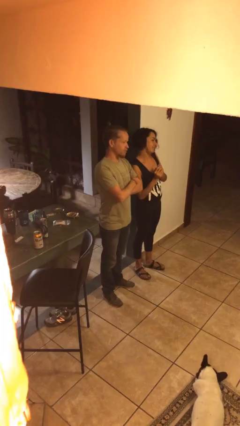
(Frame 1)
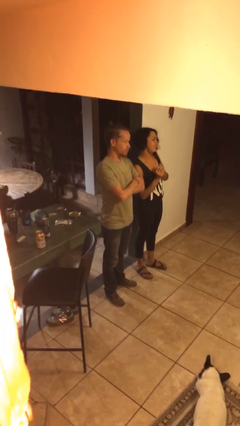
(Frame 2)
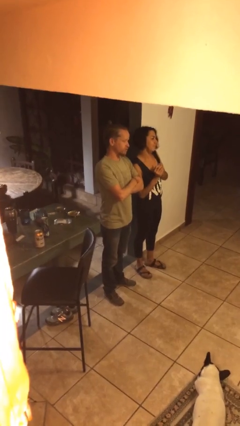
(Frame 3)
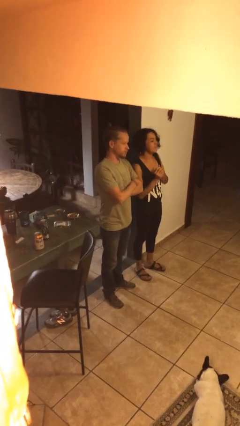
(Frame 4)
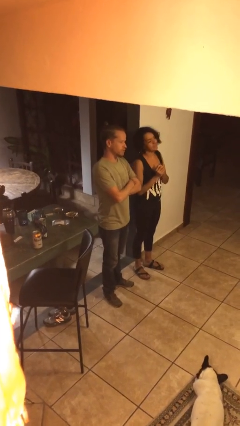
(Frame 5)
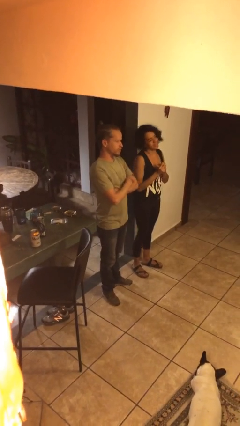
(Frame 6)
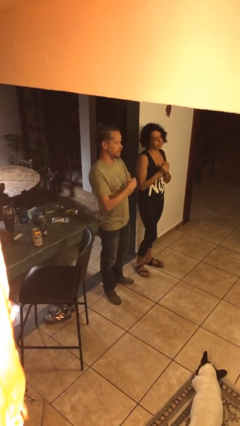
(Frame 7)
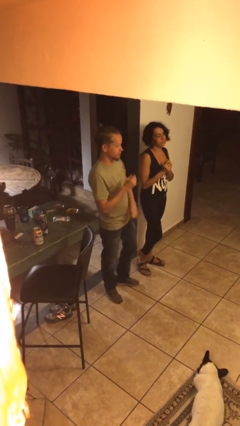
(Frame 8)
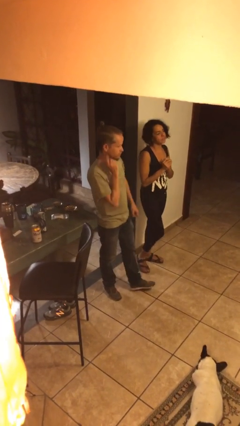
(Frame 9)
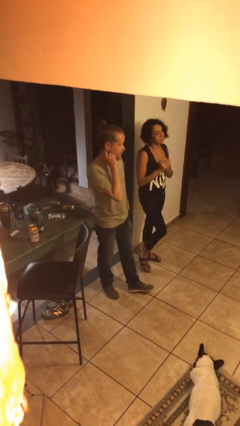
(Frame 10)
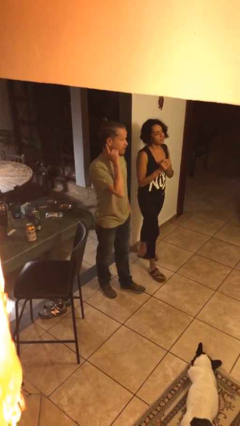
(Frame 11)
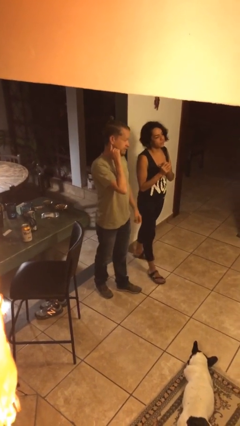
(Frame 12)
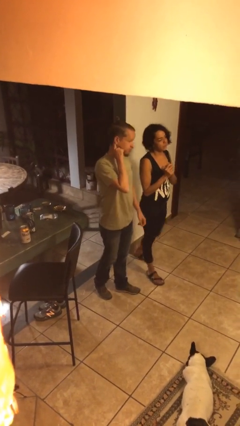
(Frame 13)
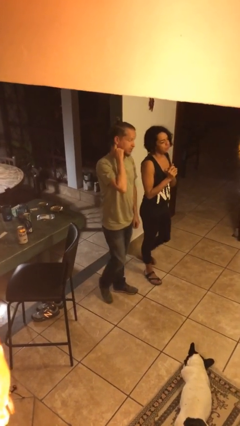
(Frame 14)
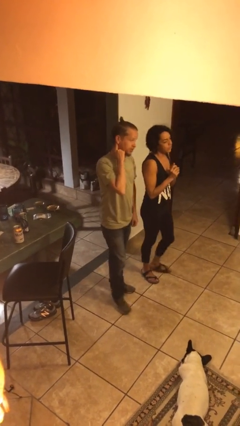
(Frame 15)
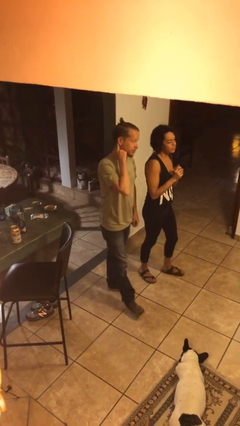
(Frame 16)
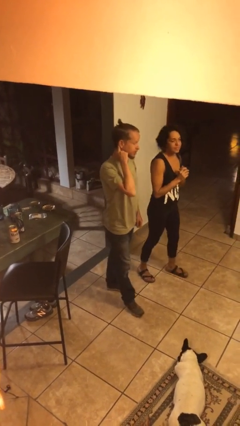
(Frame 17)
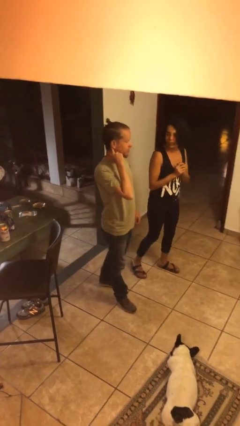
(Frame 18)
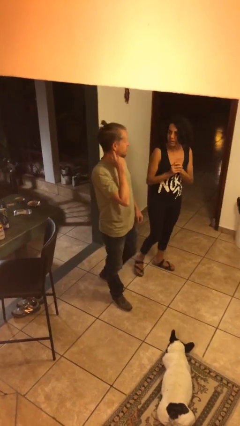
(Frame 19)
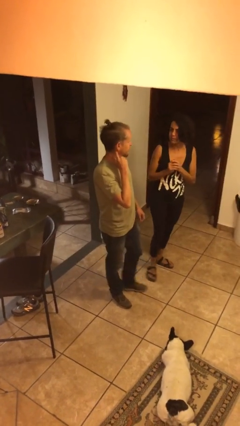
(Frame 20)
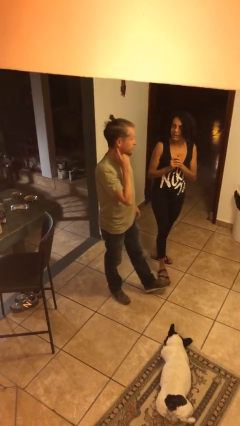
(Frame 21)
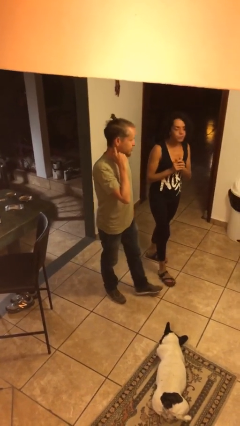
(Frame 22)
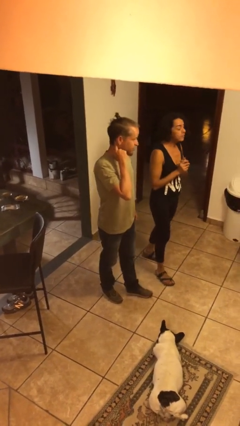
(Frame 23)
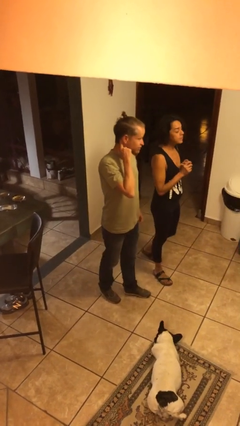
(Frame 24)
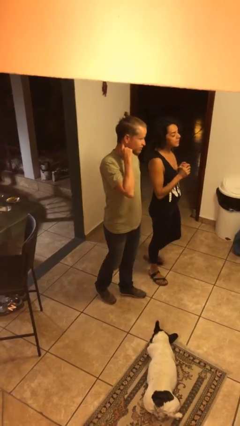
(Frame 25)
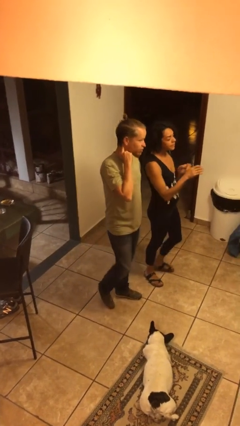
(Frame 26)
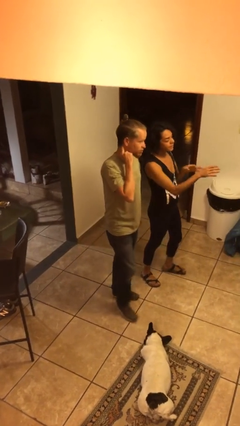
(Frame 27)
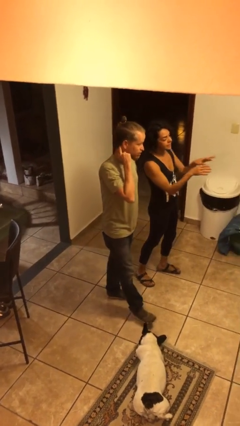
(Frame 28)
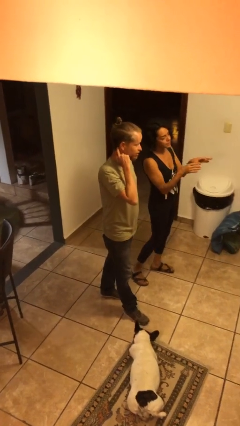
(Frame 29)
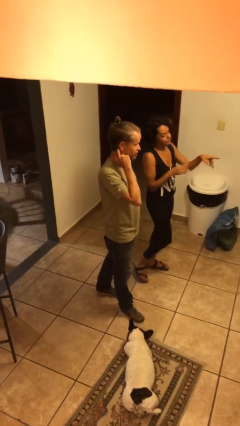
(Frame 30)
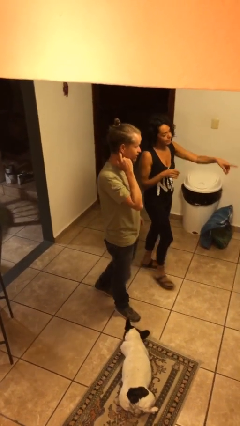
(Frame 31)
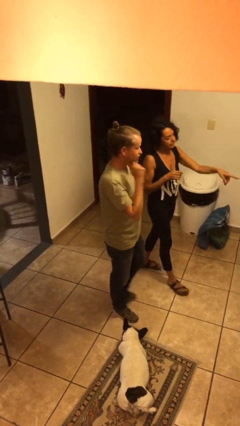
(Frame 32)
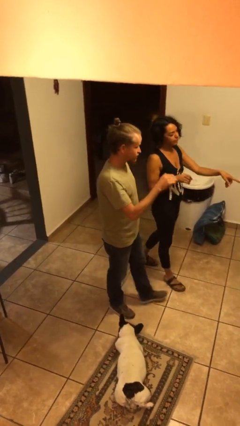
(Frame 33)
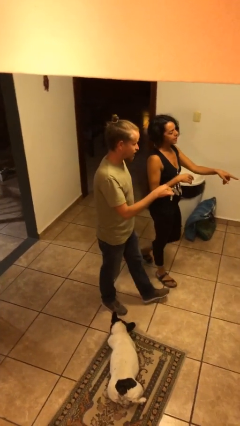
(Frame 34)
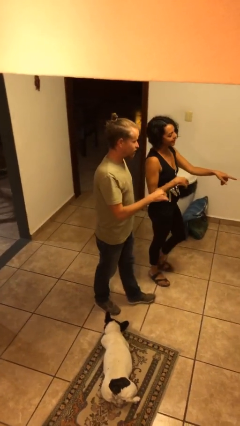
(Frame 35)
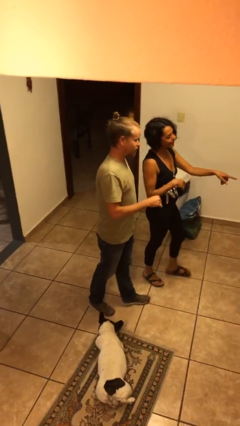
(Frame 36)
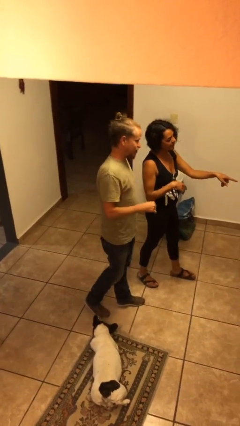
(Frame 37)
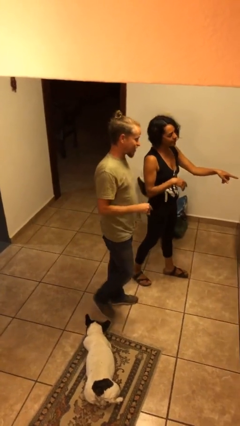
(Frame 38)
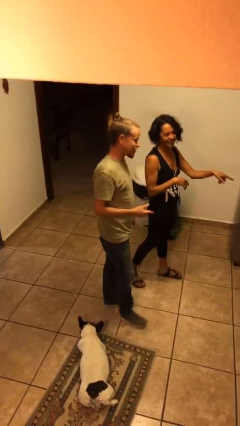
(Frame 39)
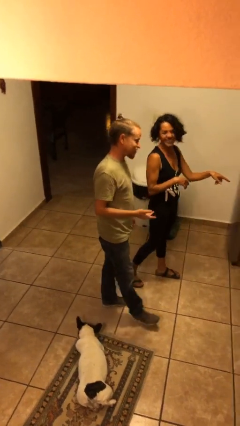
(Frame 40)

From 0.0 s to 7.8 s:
person talks to person

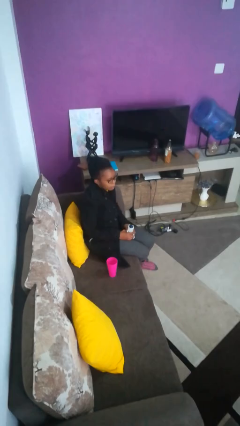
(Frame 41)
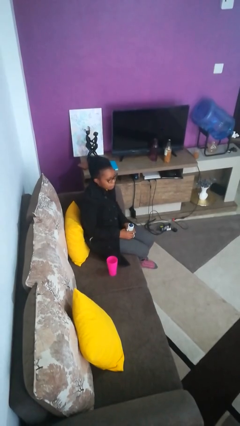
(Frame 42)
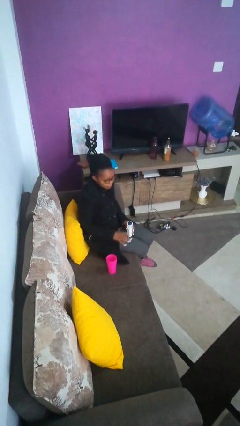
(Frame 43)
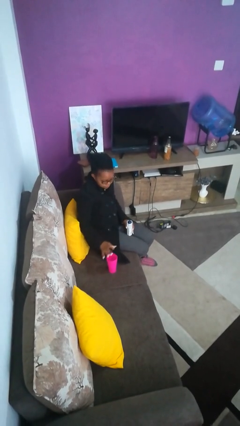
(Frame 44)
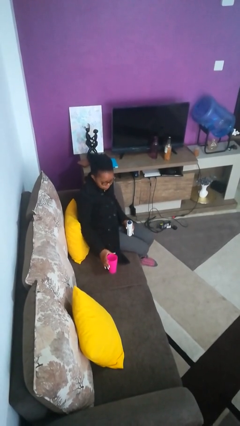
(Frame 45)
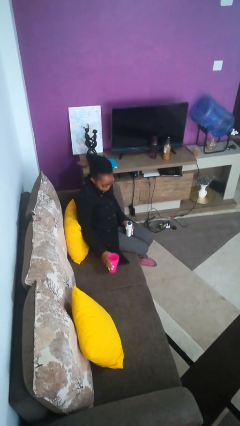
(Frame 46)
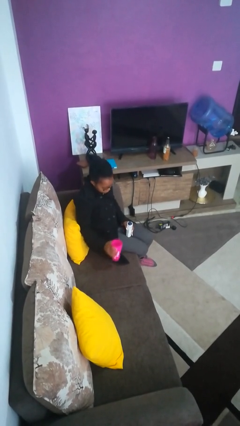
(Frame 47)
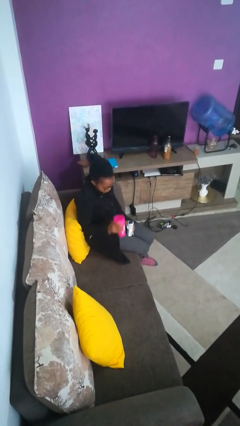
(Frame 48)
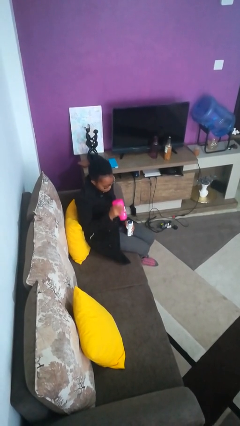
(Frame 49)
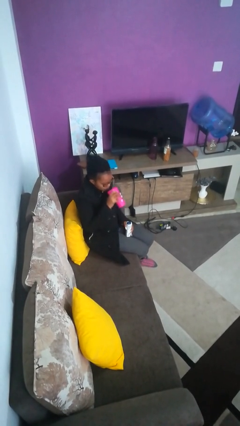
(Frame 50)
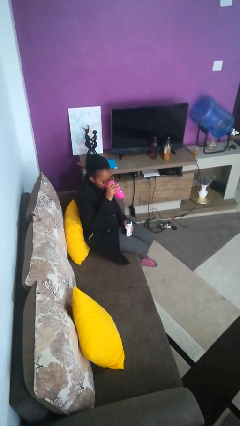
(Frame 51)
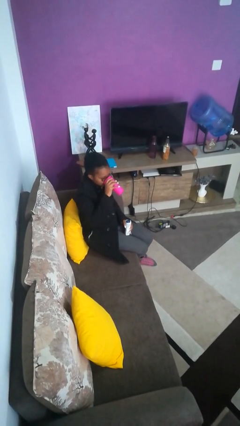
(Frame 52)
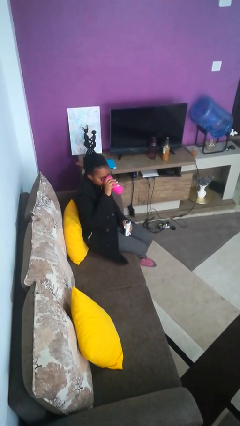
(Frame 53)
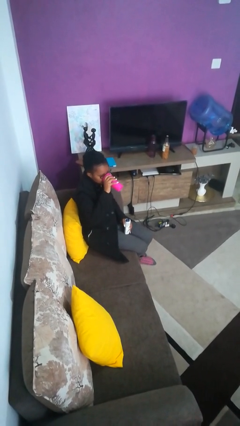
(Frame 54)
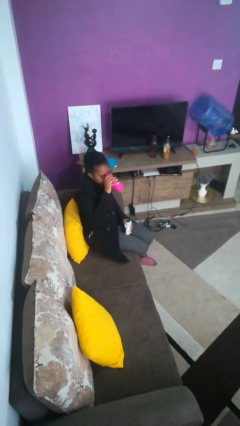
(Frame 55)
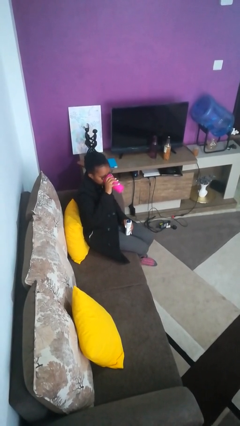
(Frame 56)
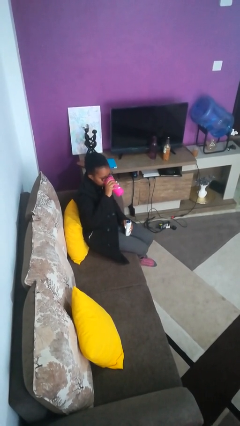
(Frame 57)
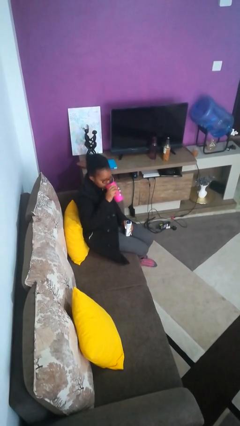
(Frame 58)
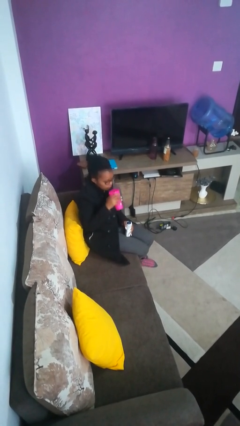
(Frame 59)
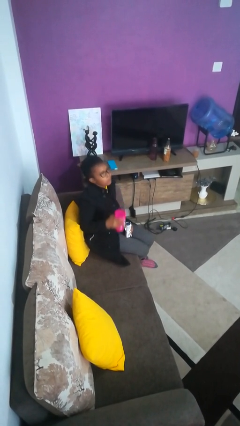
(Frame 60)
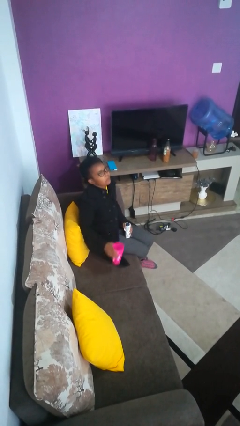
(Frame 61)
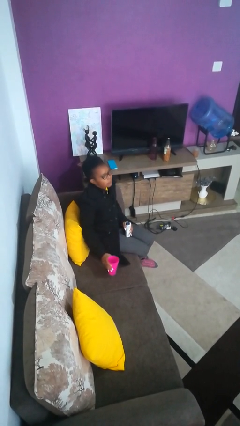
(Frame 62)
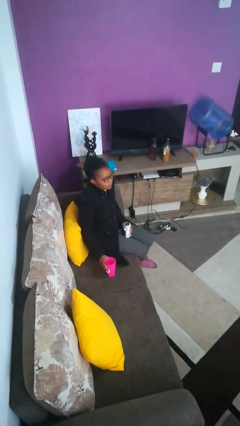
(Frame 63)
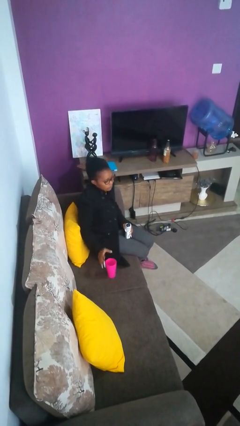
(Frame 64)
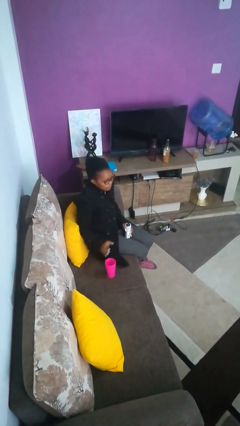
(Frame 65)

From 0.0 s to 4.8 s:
person drinks from cup

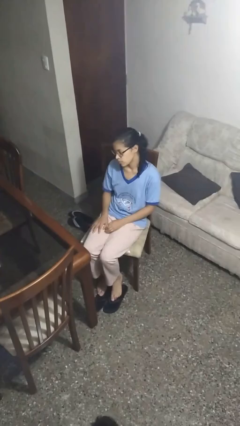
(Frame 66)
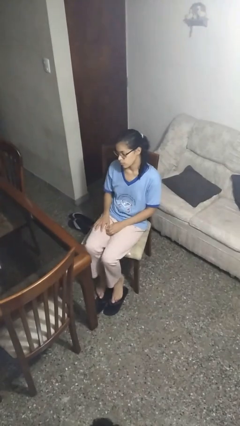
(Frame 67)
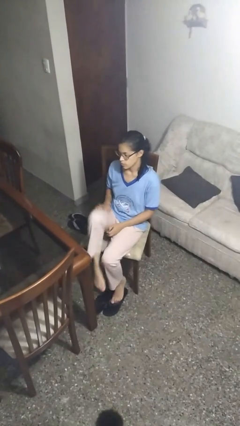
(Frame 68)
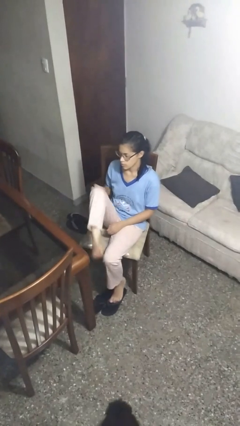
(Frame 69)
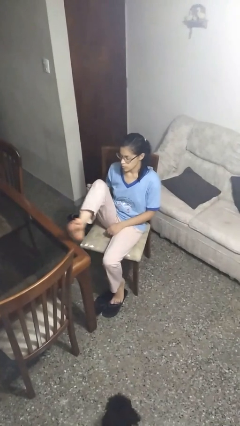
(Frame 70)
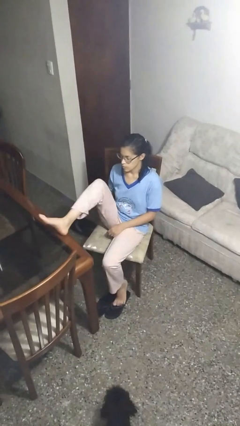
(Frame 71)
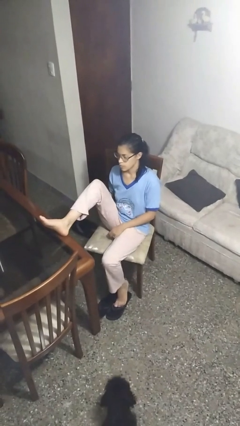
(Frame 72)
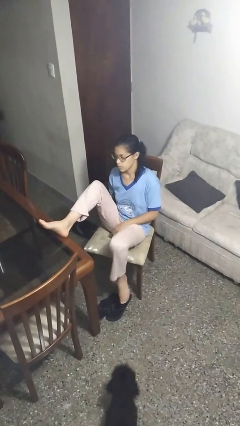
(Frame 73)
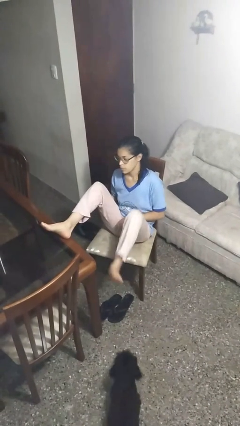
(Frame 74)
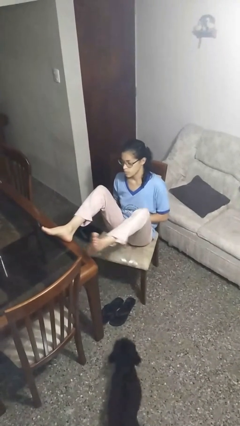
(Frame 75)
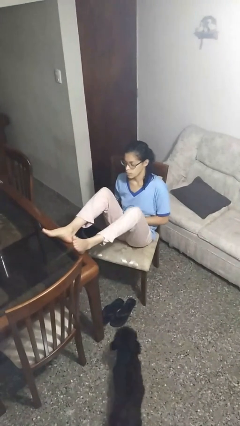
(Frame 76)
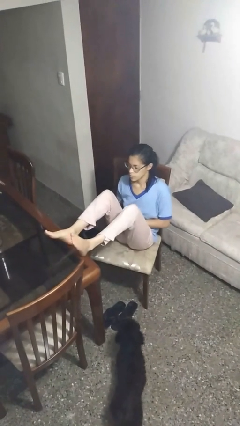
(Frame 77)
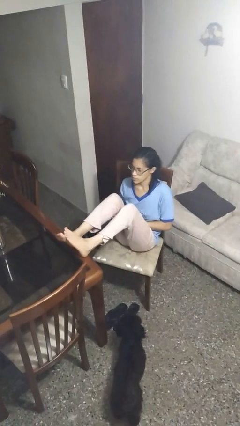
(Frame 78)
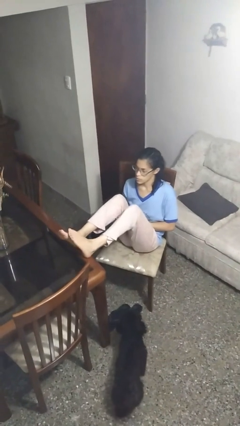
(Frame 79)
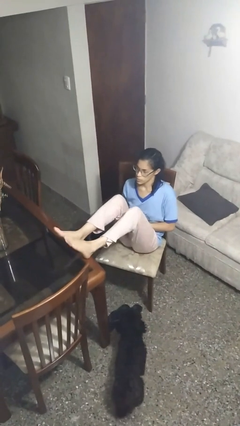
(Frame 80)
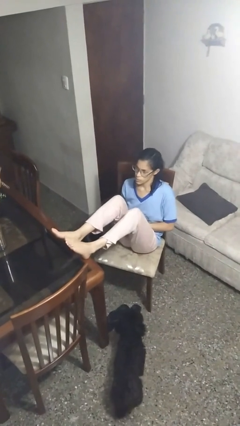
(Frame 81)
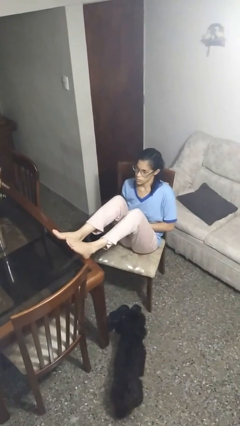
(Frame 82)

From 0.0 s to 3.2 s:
person puts feet up

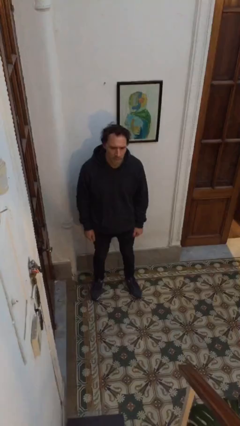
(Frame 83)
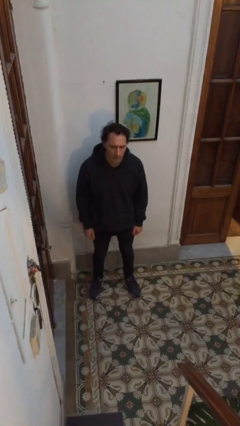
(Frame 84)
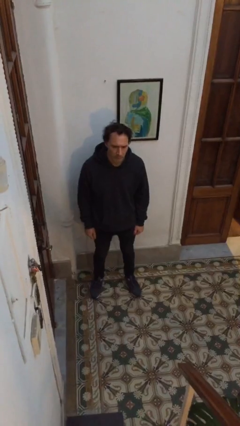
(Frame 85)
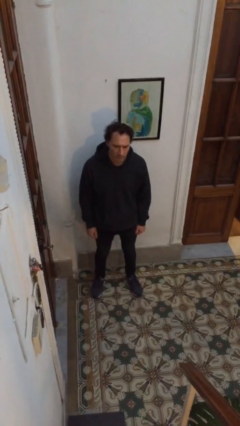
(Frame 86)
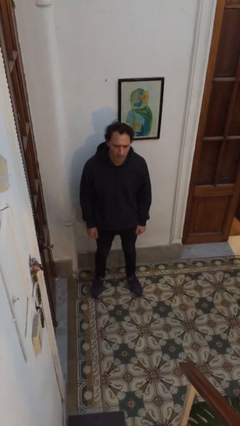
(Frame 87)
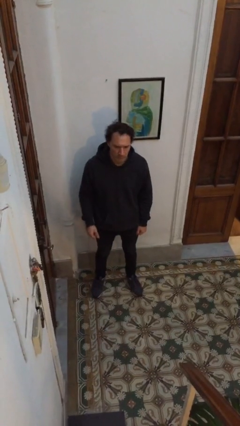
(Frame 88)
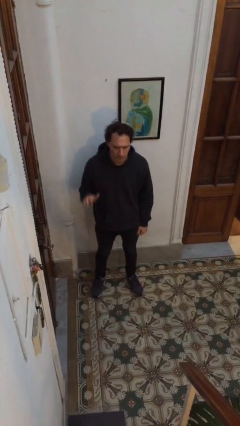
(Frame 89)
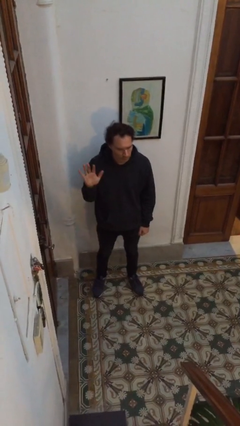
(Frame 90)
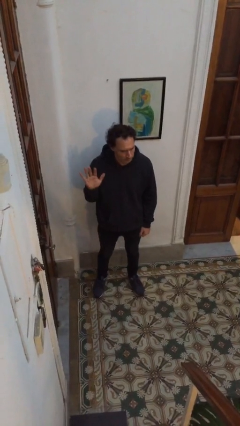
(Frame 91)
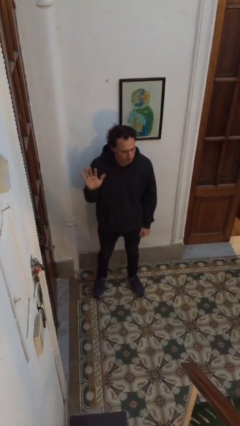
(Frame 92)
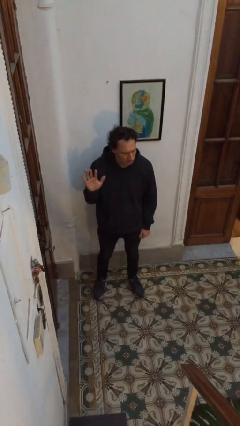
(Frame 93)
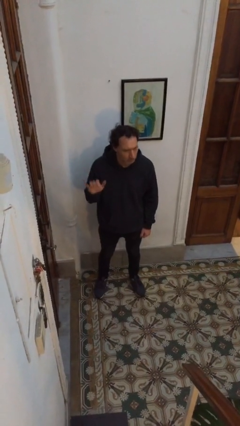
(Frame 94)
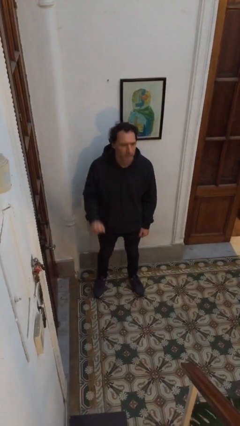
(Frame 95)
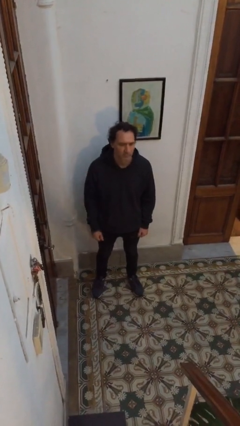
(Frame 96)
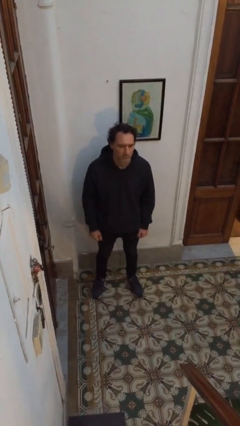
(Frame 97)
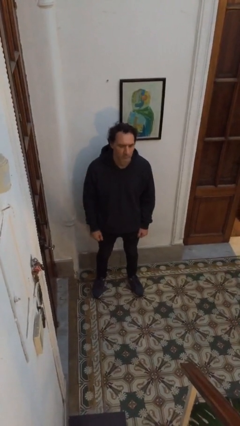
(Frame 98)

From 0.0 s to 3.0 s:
person gestures number five
